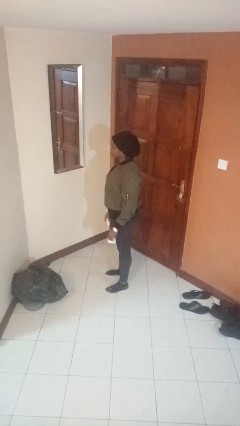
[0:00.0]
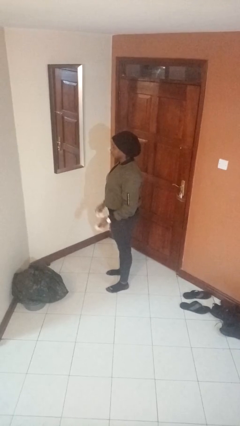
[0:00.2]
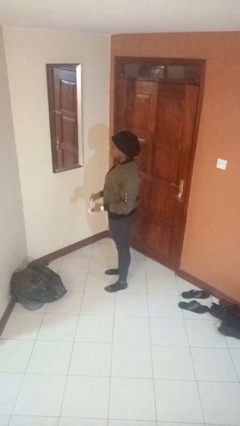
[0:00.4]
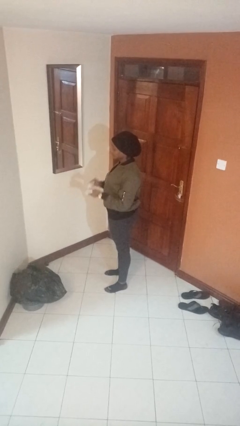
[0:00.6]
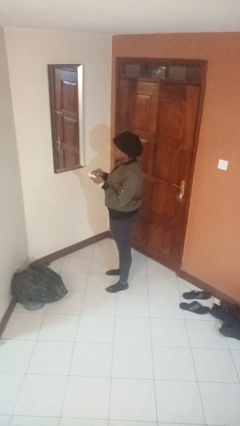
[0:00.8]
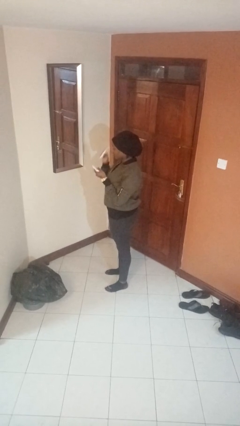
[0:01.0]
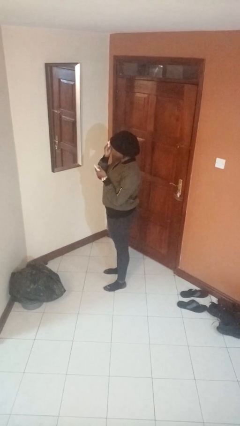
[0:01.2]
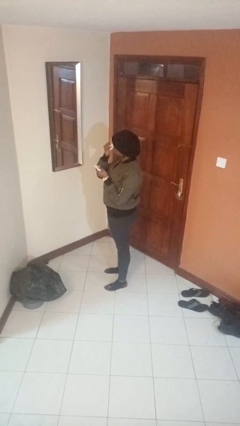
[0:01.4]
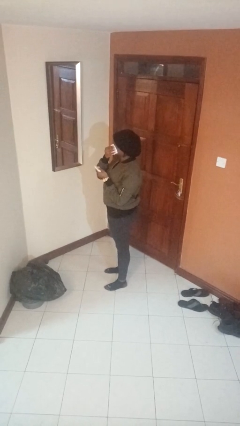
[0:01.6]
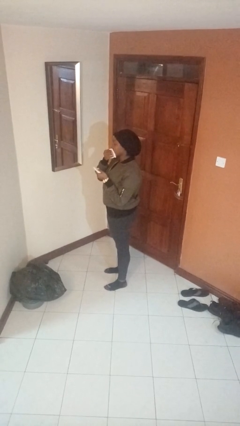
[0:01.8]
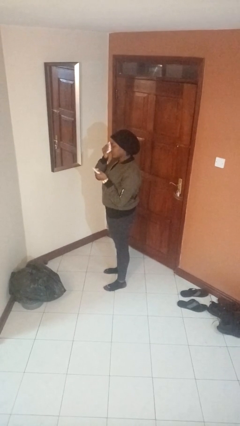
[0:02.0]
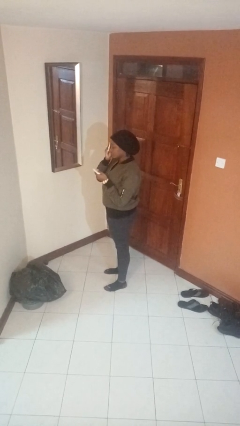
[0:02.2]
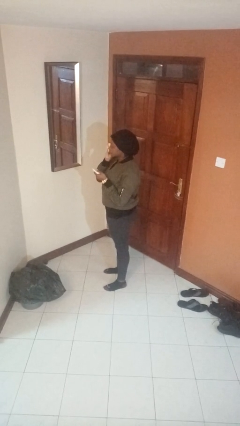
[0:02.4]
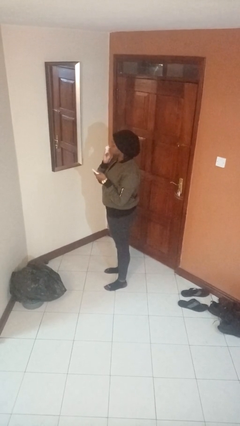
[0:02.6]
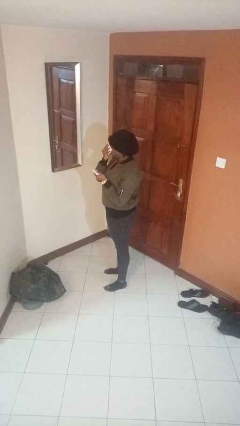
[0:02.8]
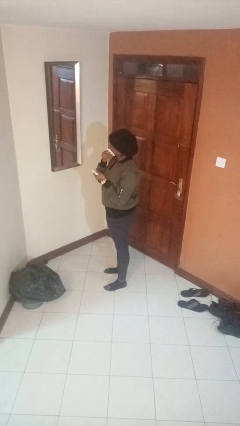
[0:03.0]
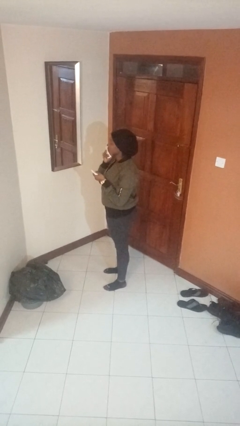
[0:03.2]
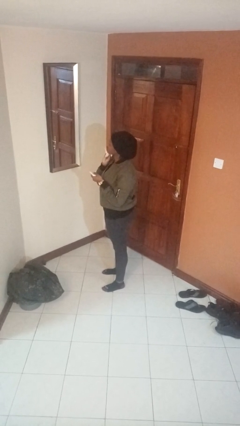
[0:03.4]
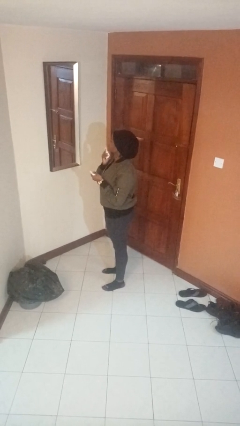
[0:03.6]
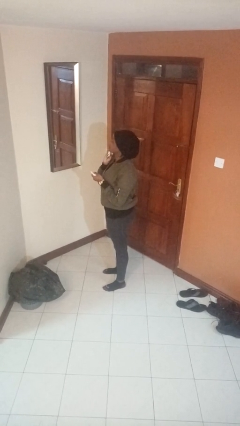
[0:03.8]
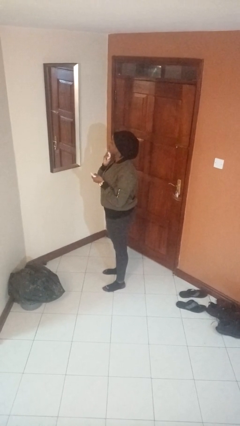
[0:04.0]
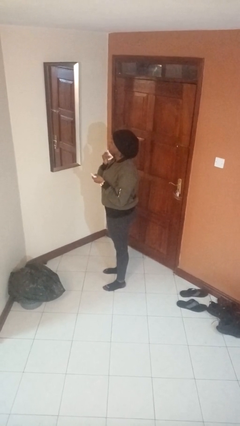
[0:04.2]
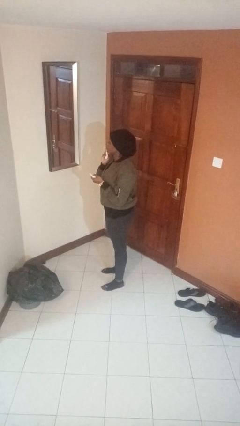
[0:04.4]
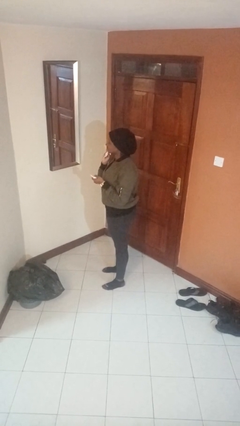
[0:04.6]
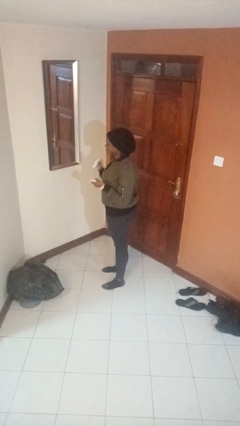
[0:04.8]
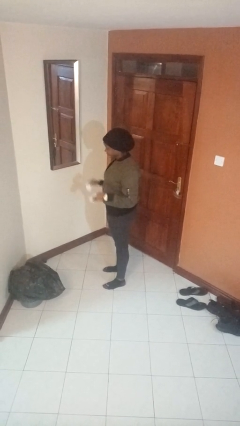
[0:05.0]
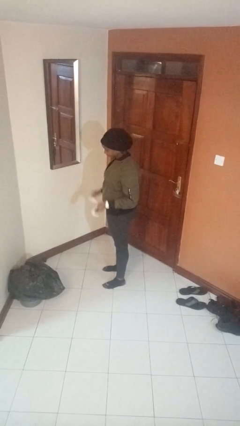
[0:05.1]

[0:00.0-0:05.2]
person applies foundation makeup

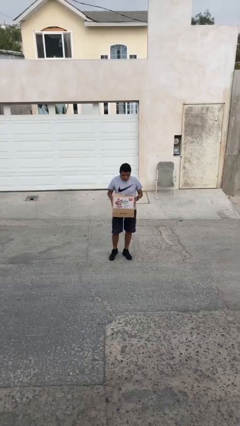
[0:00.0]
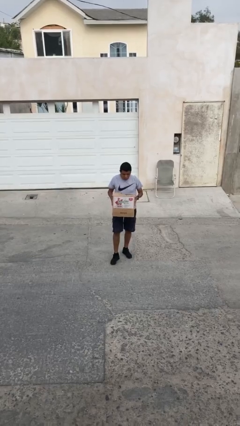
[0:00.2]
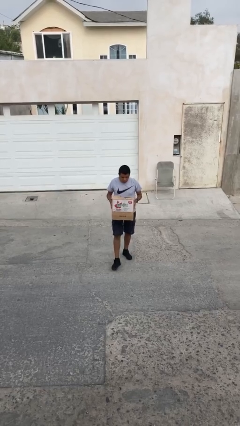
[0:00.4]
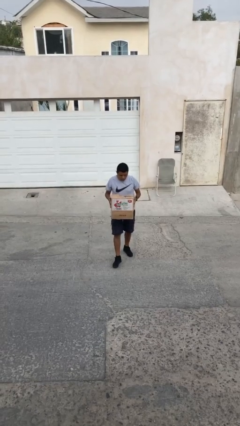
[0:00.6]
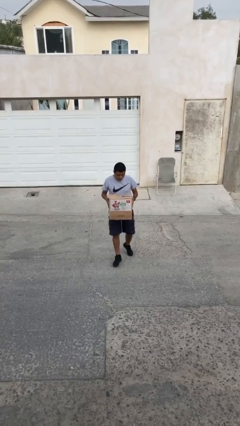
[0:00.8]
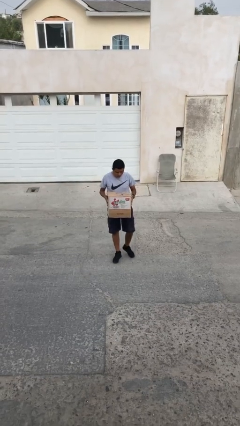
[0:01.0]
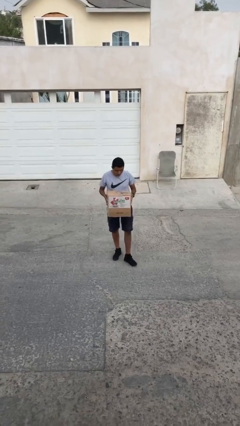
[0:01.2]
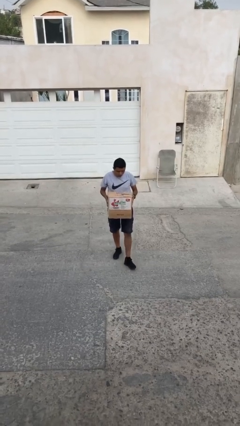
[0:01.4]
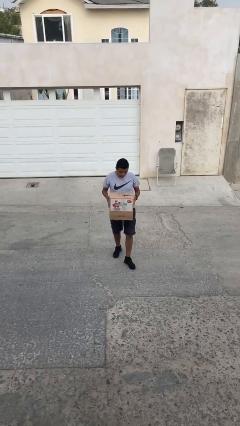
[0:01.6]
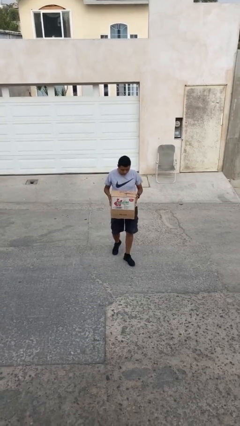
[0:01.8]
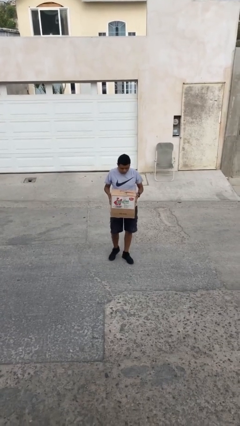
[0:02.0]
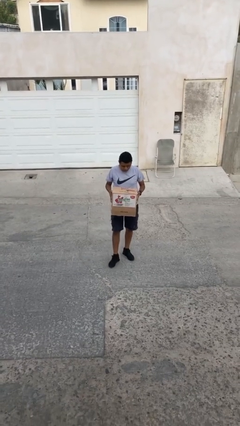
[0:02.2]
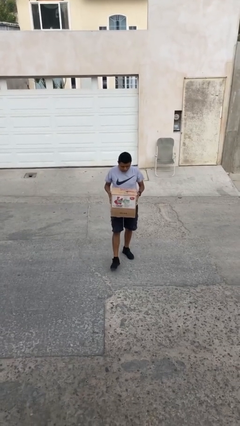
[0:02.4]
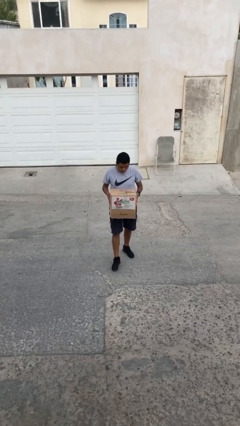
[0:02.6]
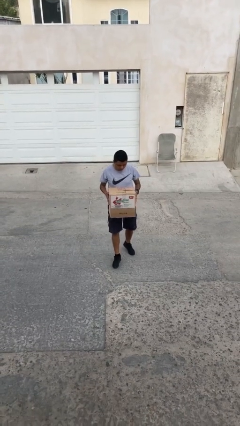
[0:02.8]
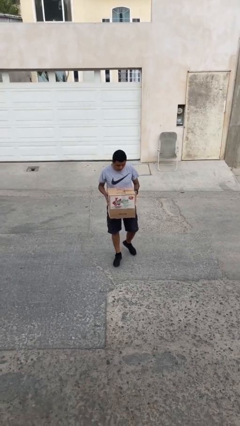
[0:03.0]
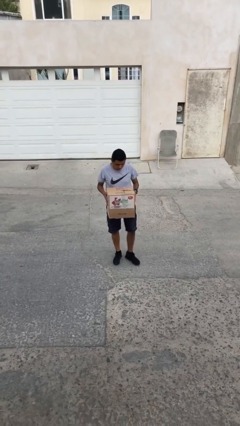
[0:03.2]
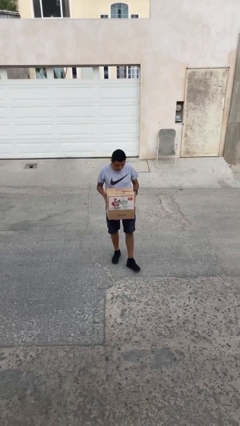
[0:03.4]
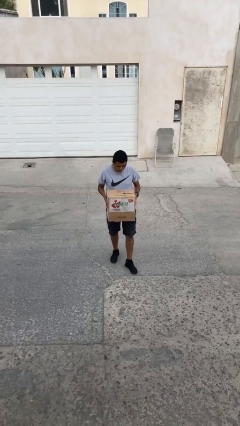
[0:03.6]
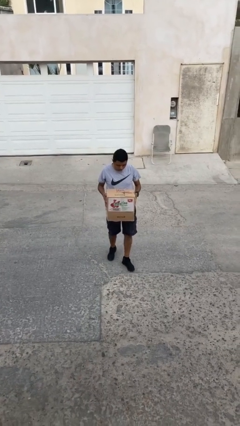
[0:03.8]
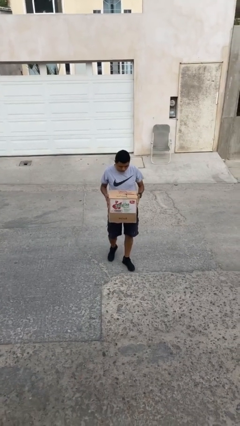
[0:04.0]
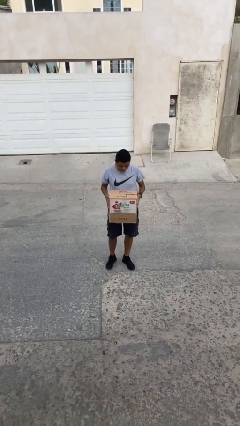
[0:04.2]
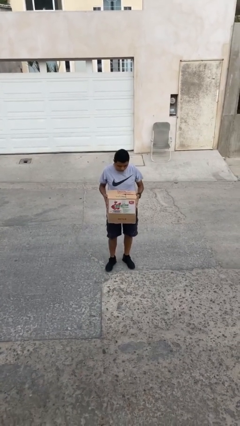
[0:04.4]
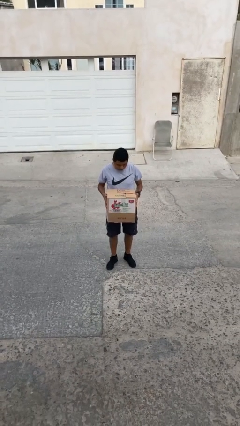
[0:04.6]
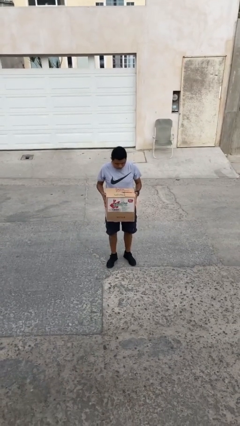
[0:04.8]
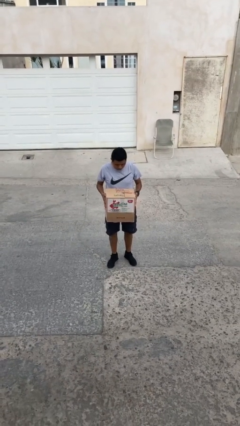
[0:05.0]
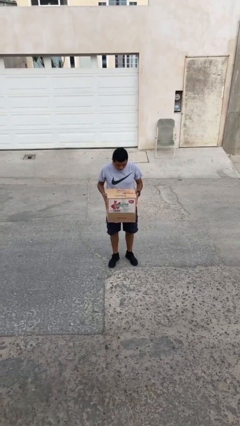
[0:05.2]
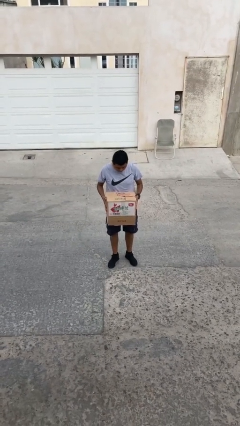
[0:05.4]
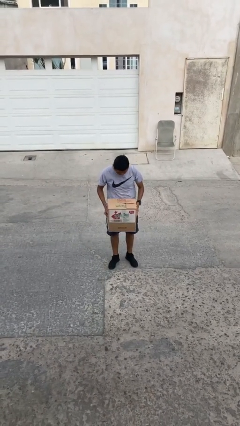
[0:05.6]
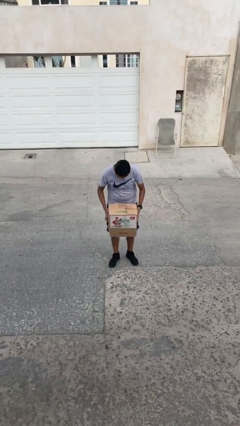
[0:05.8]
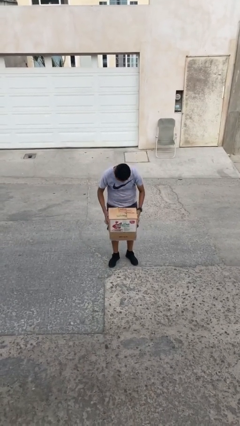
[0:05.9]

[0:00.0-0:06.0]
person carries heavy object

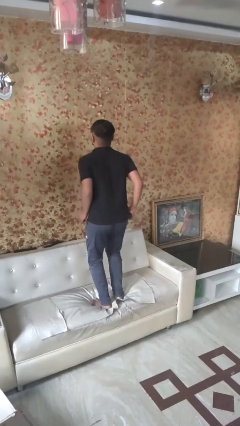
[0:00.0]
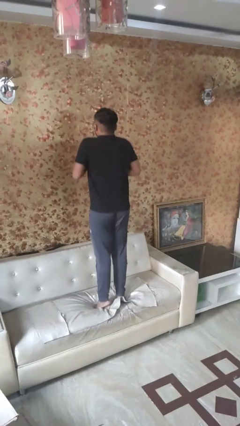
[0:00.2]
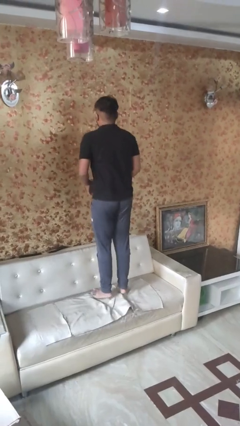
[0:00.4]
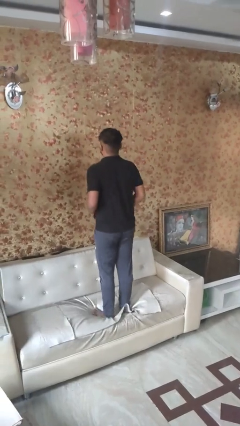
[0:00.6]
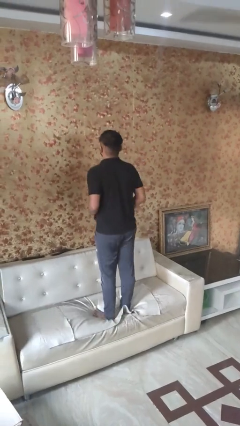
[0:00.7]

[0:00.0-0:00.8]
person jumps on bed

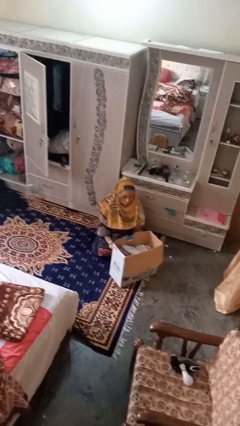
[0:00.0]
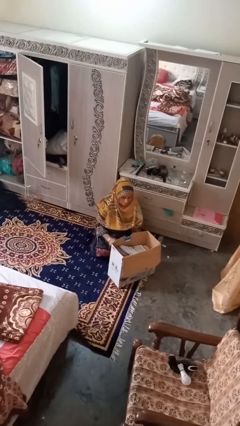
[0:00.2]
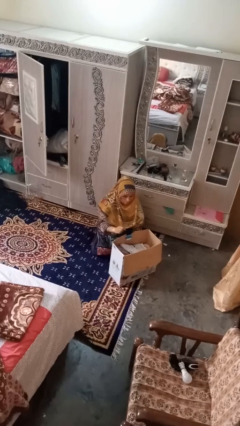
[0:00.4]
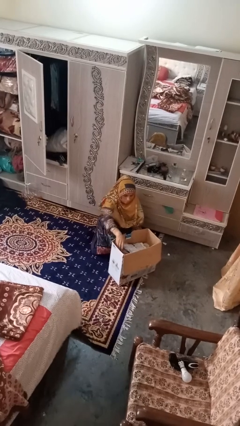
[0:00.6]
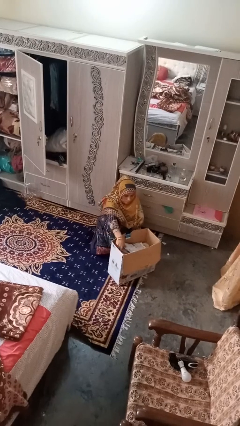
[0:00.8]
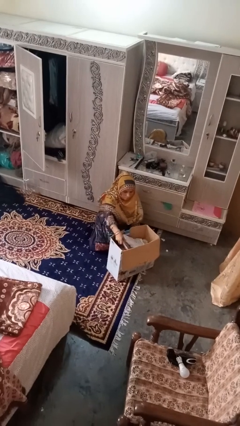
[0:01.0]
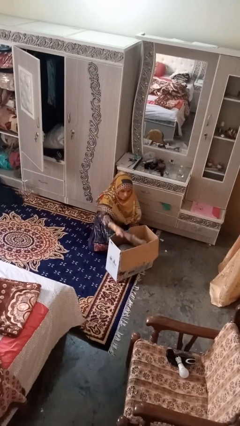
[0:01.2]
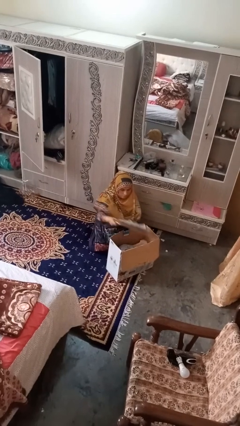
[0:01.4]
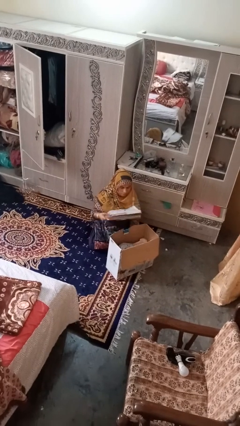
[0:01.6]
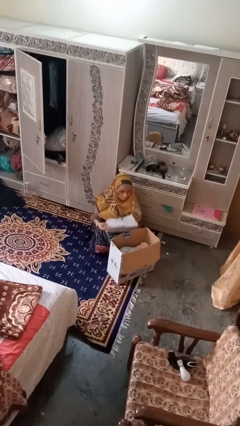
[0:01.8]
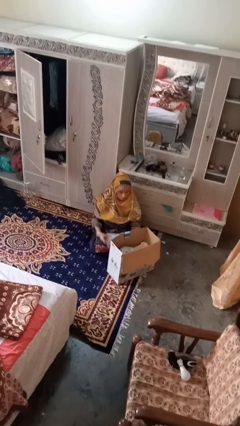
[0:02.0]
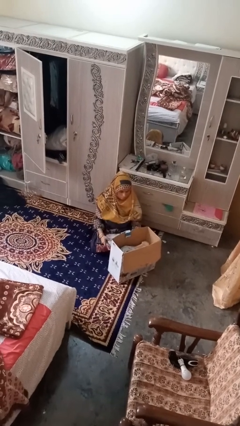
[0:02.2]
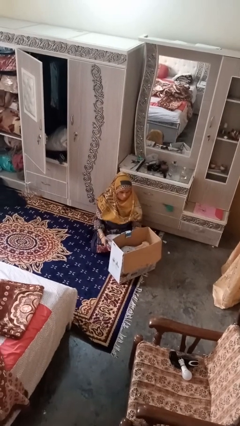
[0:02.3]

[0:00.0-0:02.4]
person takes object from box

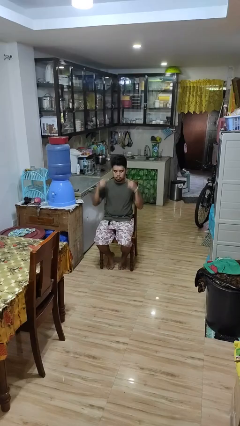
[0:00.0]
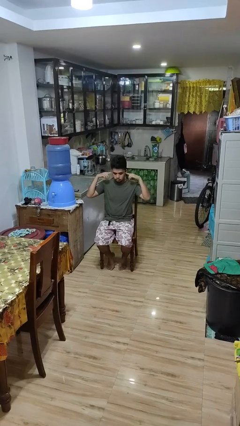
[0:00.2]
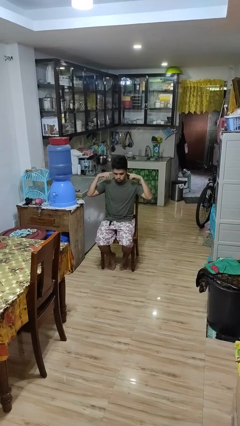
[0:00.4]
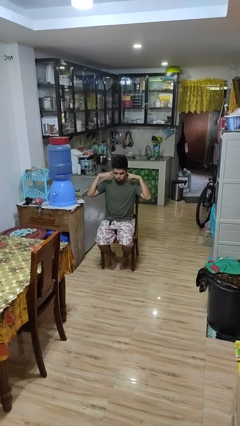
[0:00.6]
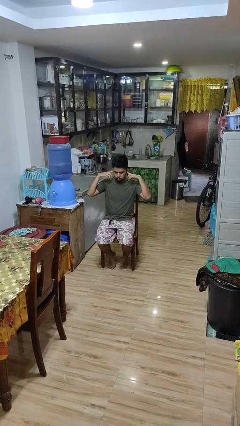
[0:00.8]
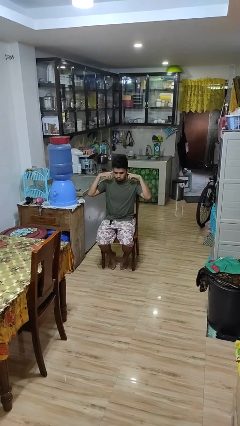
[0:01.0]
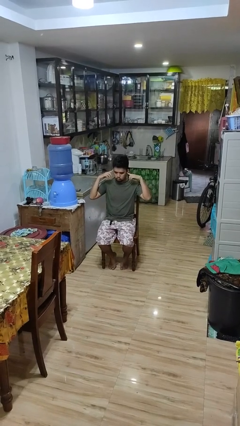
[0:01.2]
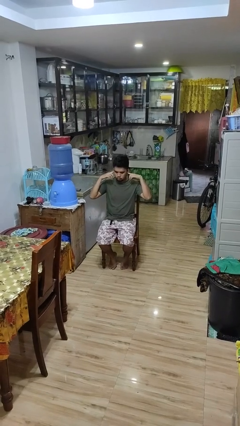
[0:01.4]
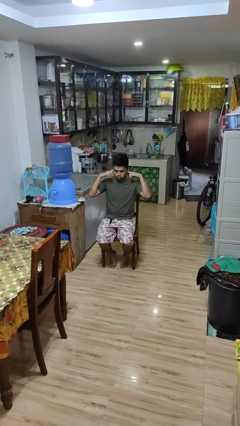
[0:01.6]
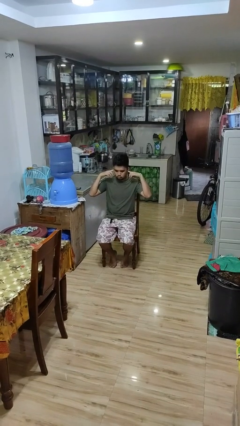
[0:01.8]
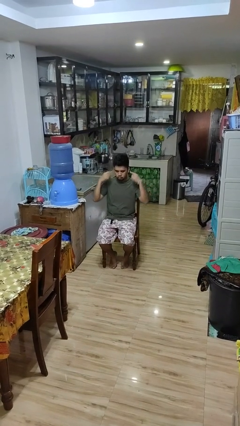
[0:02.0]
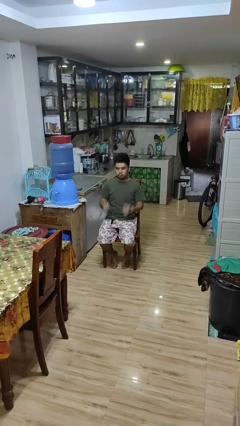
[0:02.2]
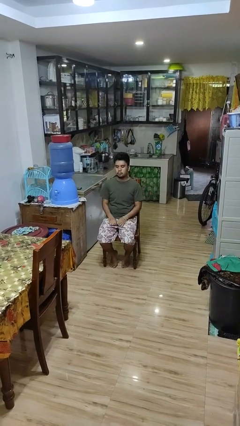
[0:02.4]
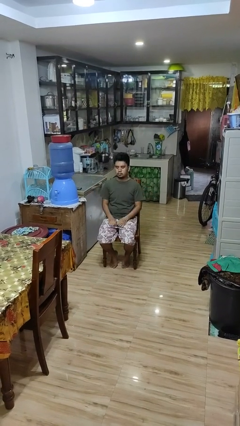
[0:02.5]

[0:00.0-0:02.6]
person puts fingers in ear

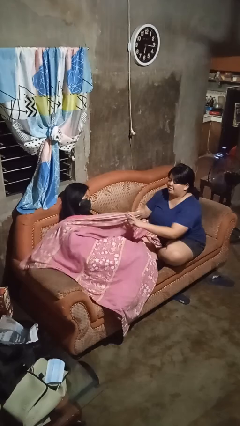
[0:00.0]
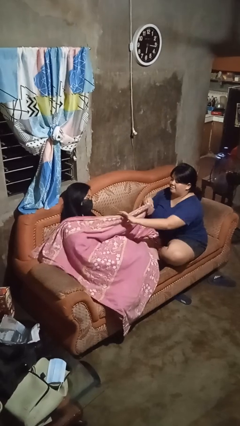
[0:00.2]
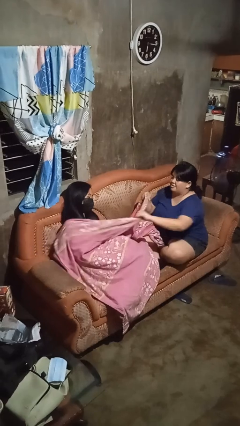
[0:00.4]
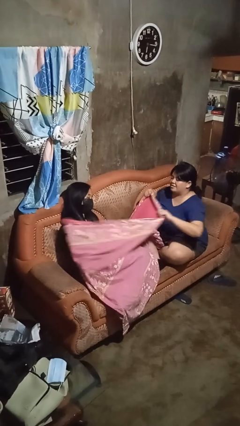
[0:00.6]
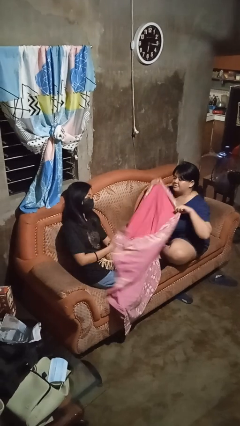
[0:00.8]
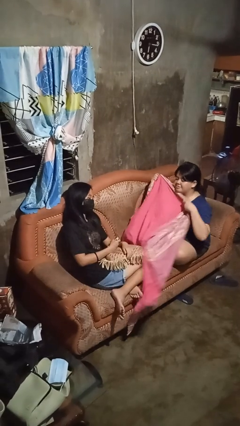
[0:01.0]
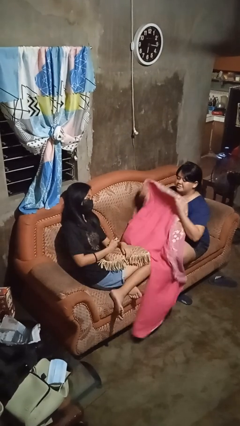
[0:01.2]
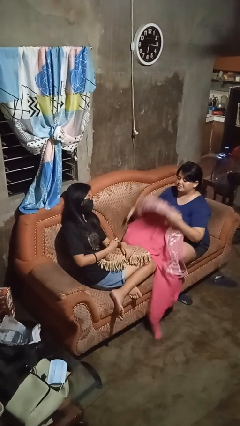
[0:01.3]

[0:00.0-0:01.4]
person uncovers friend with blanket
